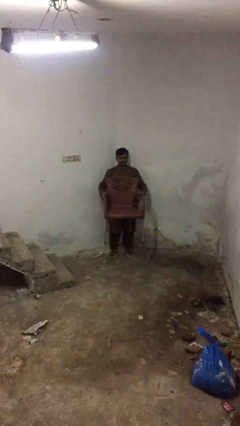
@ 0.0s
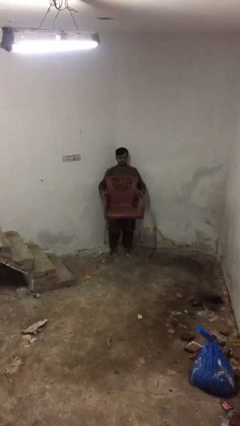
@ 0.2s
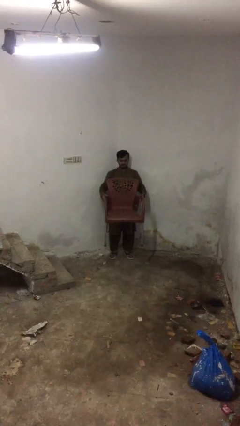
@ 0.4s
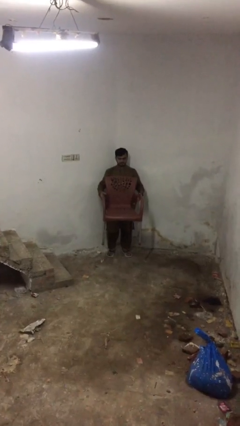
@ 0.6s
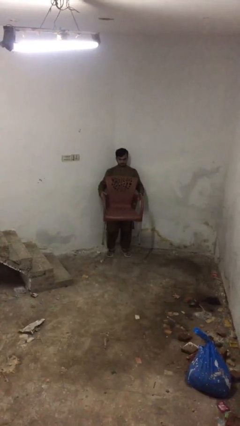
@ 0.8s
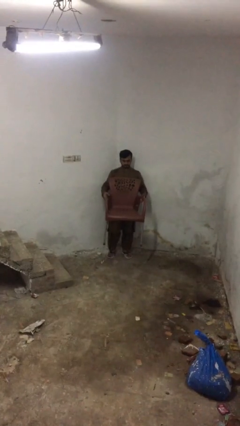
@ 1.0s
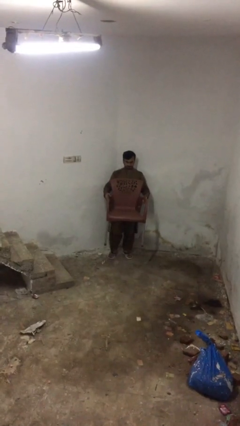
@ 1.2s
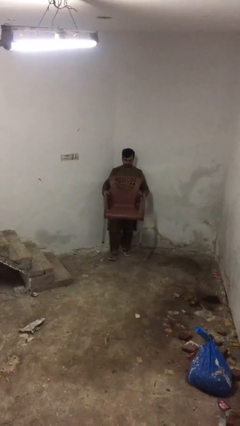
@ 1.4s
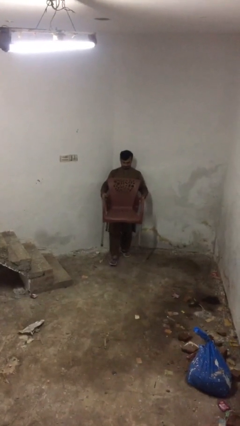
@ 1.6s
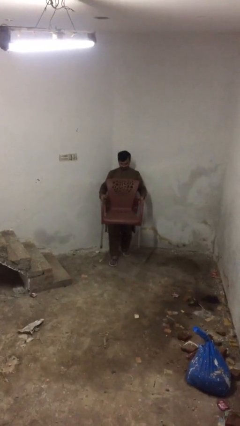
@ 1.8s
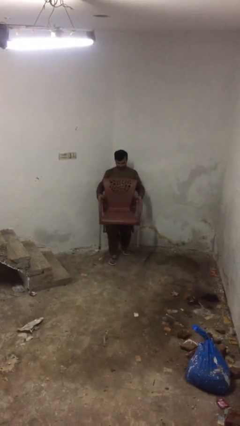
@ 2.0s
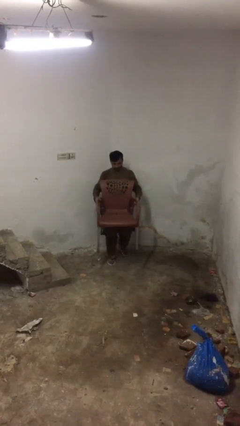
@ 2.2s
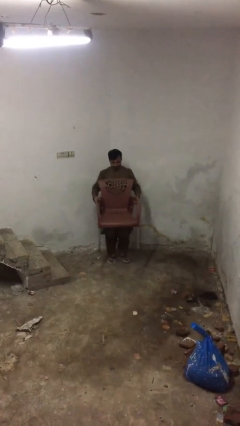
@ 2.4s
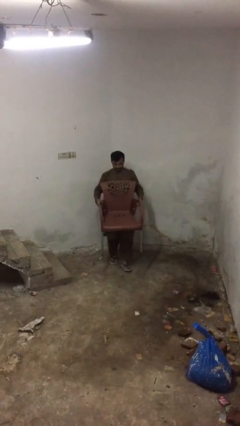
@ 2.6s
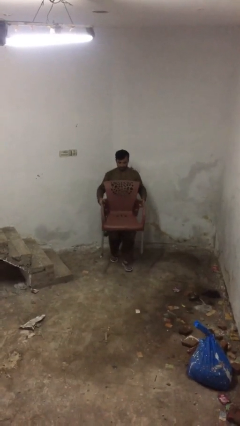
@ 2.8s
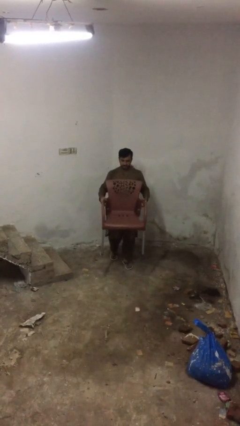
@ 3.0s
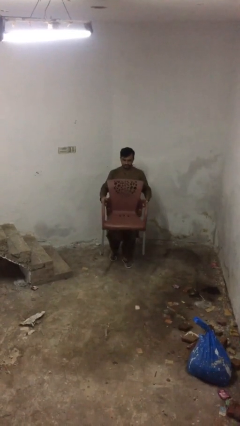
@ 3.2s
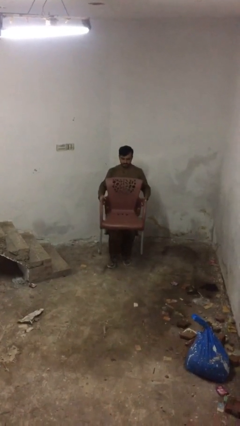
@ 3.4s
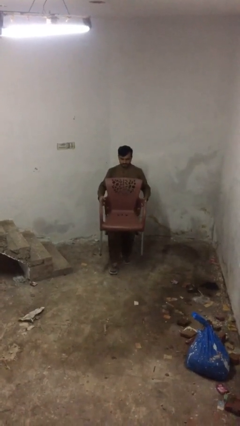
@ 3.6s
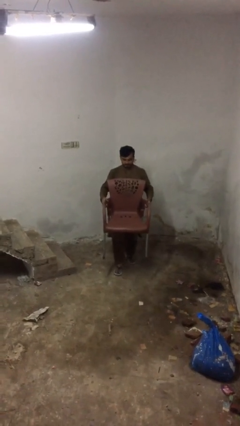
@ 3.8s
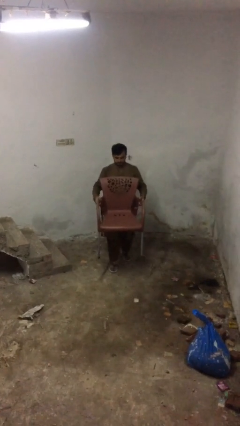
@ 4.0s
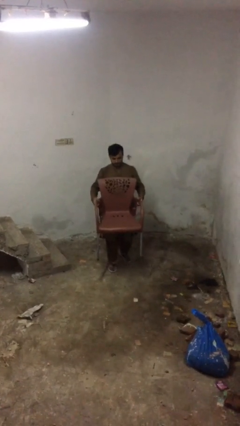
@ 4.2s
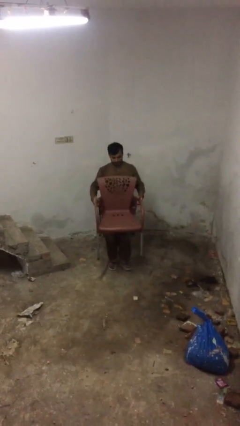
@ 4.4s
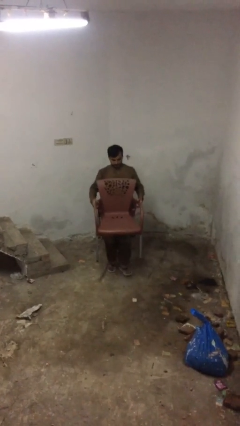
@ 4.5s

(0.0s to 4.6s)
person carries heavy object

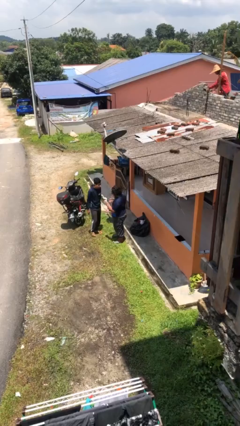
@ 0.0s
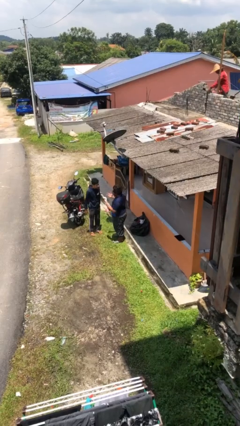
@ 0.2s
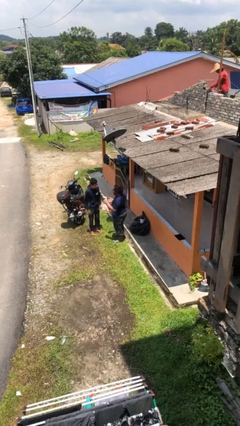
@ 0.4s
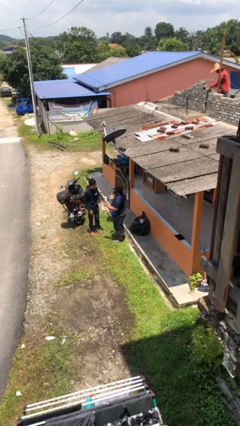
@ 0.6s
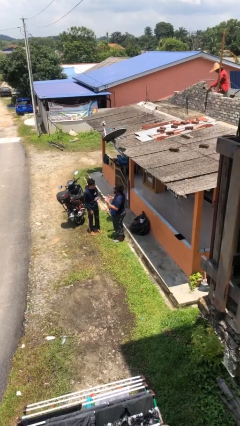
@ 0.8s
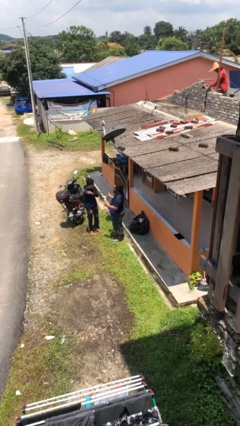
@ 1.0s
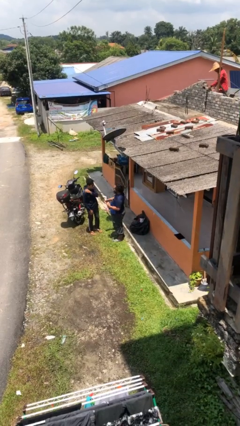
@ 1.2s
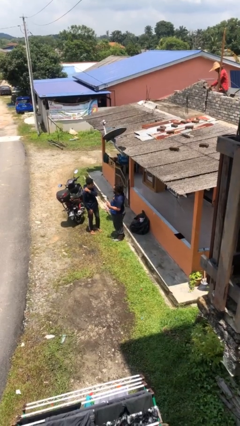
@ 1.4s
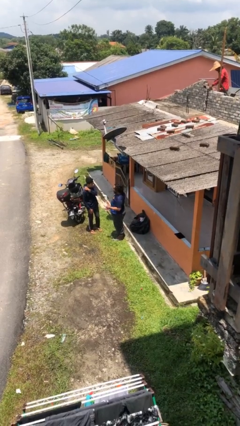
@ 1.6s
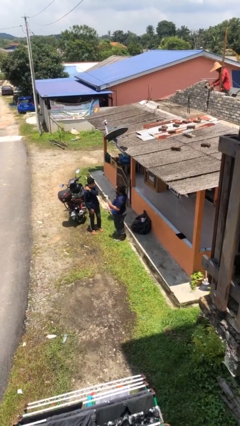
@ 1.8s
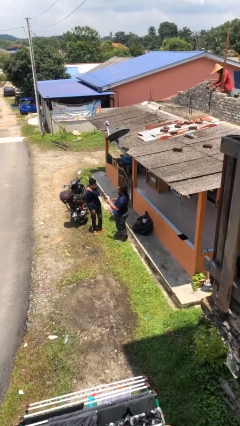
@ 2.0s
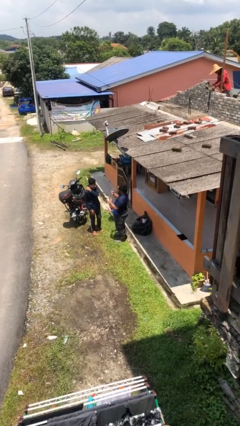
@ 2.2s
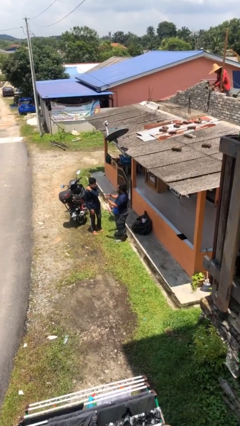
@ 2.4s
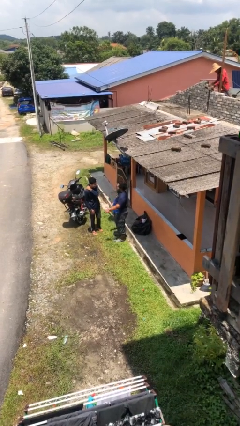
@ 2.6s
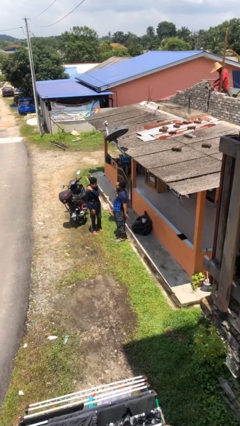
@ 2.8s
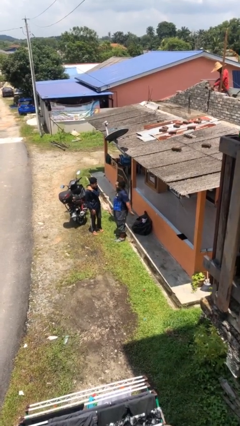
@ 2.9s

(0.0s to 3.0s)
person talks to person

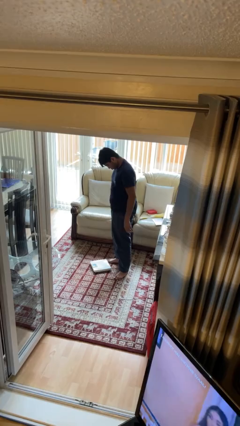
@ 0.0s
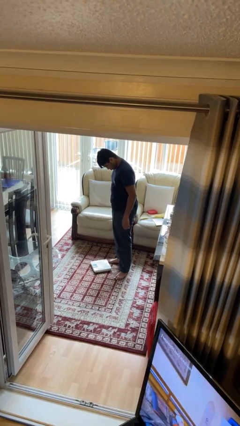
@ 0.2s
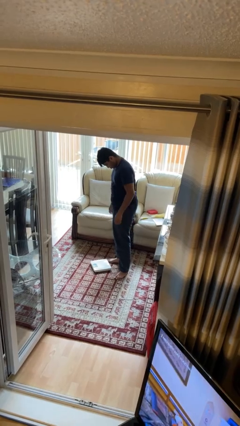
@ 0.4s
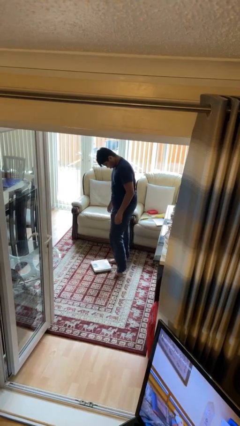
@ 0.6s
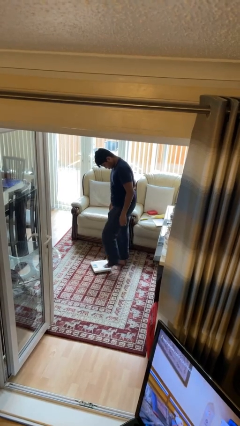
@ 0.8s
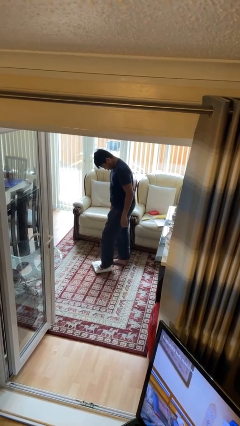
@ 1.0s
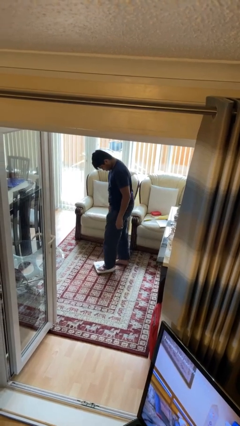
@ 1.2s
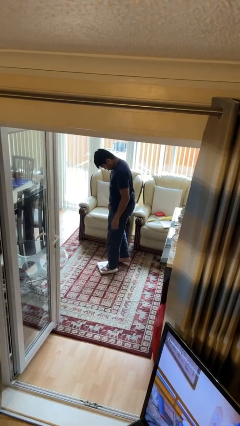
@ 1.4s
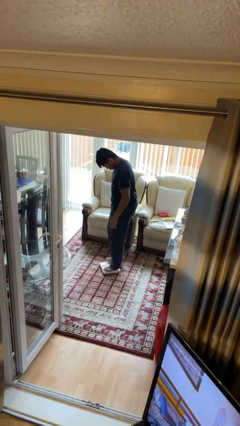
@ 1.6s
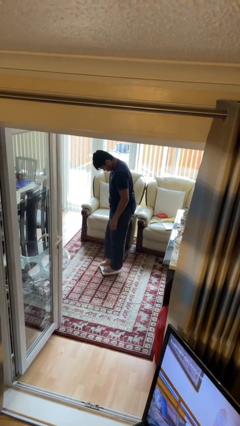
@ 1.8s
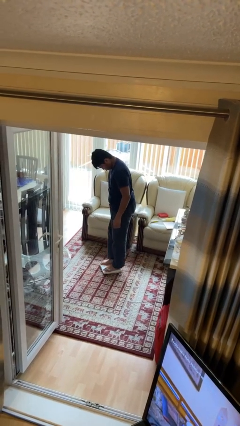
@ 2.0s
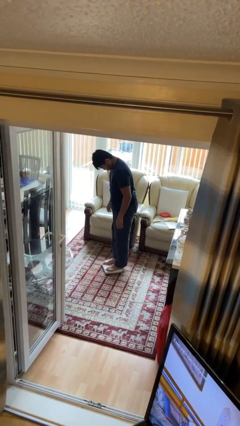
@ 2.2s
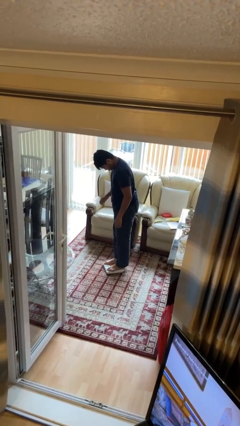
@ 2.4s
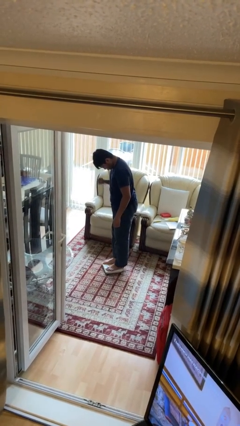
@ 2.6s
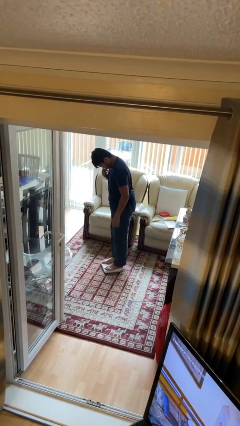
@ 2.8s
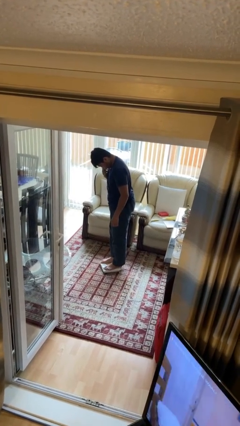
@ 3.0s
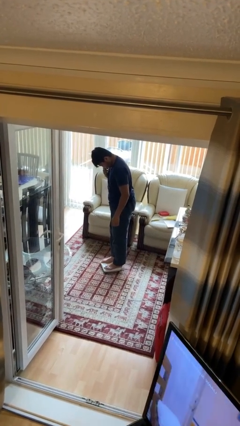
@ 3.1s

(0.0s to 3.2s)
person uses bodyweight scale

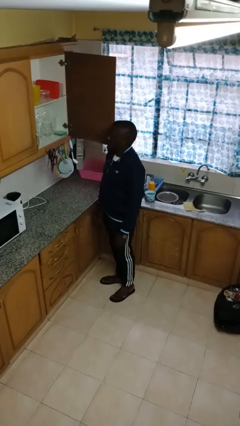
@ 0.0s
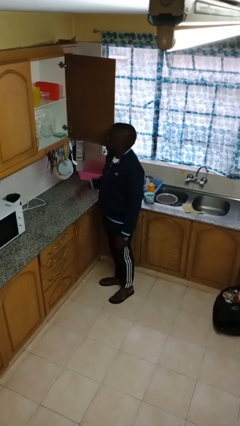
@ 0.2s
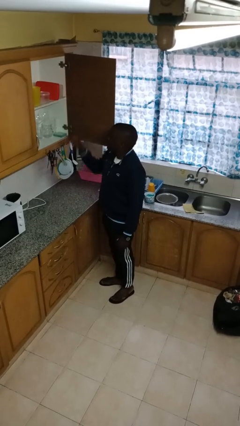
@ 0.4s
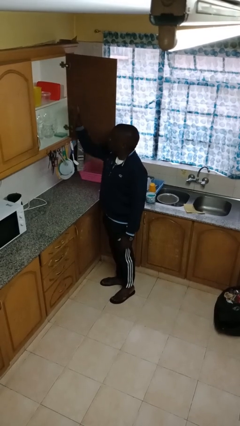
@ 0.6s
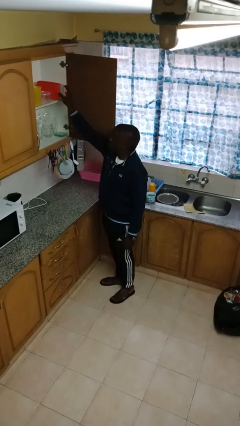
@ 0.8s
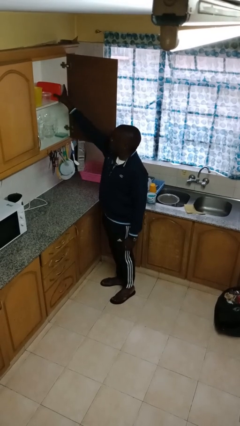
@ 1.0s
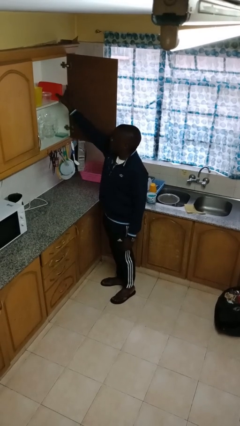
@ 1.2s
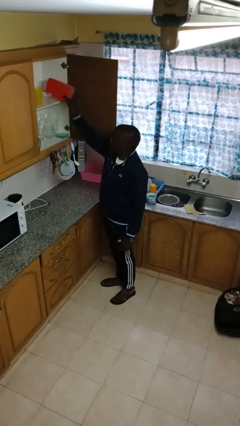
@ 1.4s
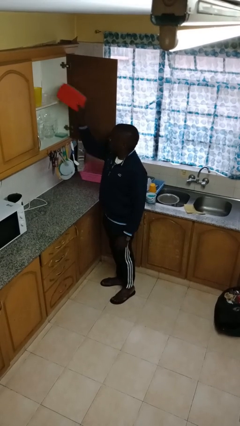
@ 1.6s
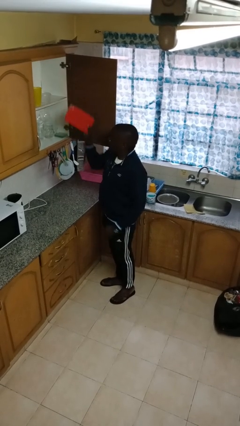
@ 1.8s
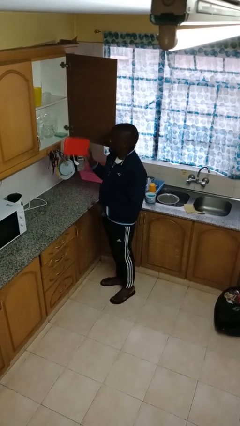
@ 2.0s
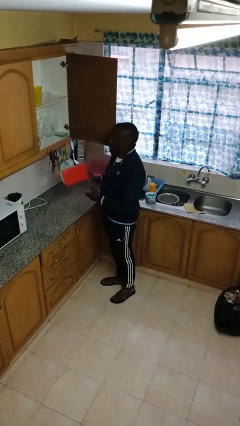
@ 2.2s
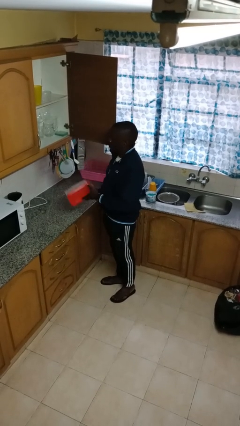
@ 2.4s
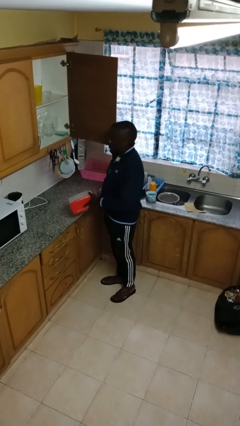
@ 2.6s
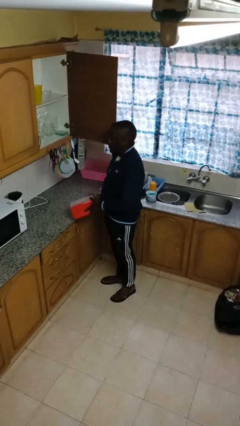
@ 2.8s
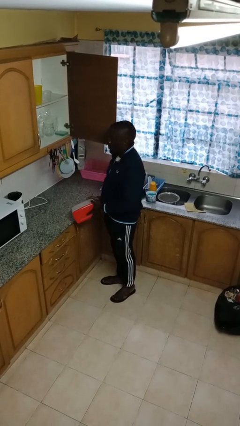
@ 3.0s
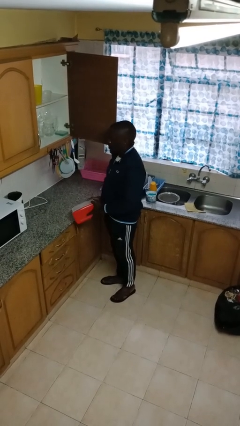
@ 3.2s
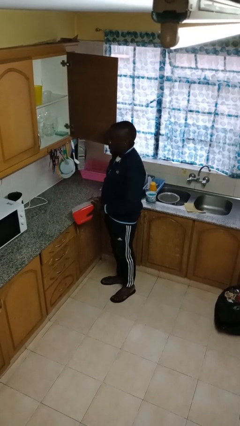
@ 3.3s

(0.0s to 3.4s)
person picks up object from shelf

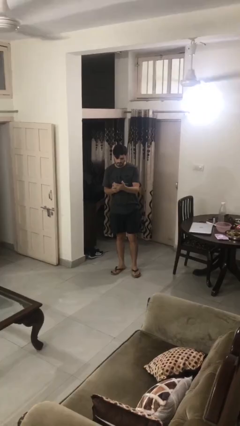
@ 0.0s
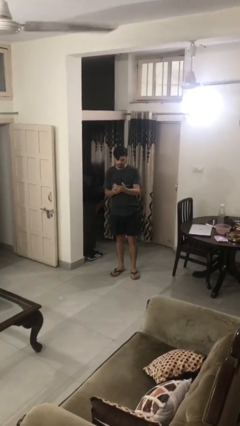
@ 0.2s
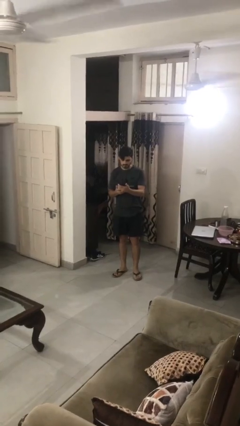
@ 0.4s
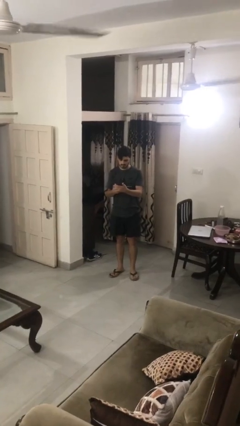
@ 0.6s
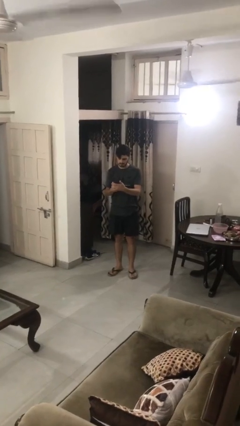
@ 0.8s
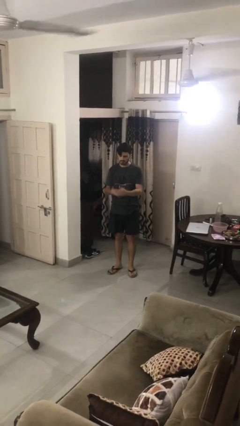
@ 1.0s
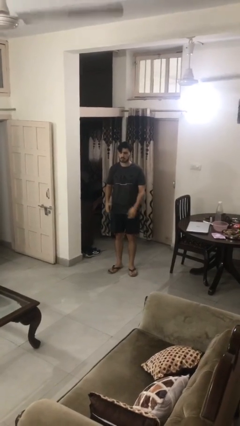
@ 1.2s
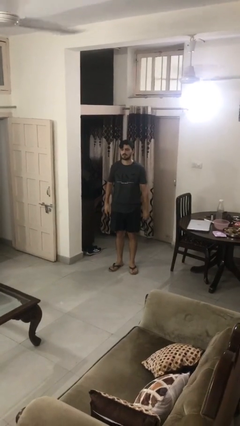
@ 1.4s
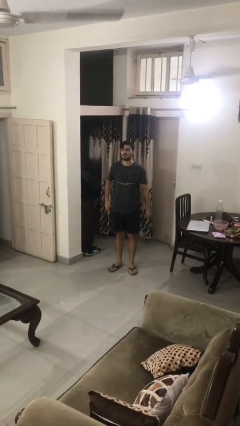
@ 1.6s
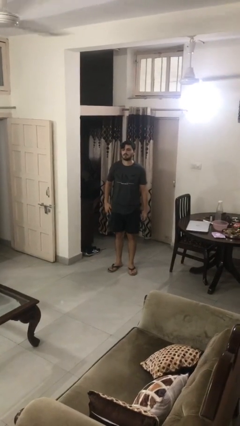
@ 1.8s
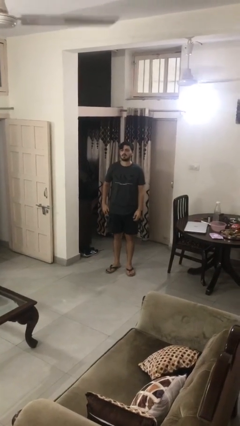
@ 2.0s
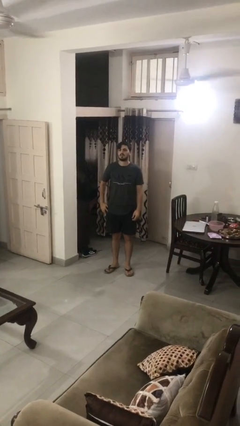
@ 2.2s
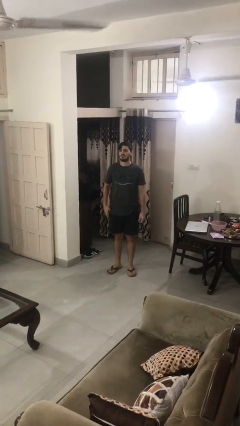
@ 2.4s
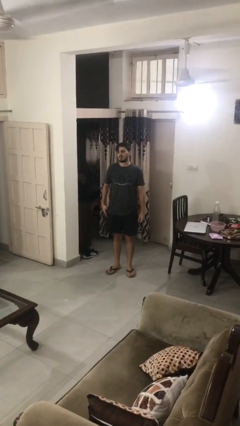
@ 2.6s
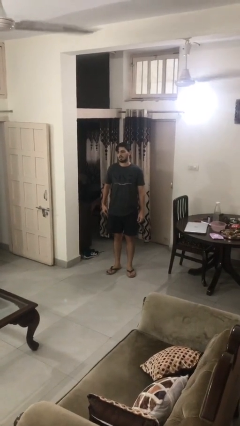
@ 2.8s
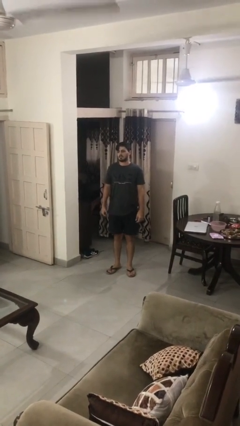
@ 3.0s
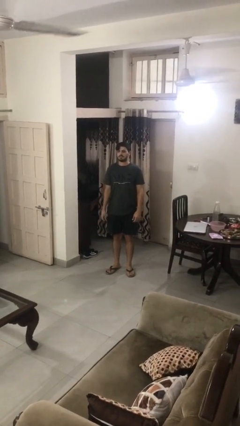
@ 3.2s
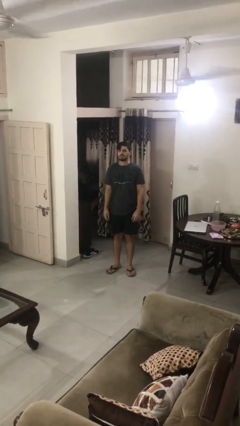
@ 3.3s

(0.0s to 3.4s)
person puts phone into pocket
